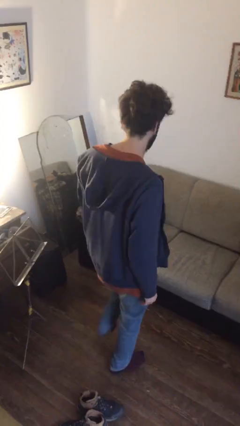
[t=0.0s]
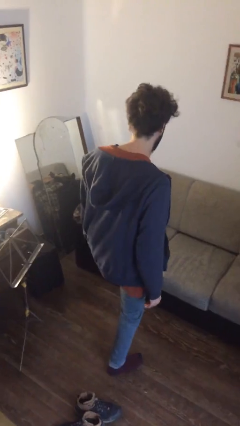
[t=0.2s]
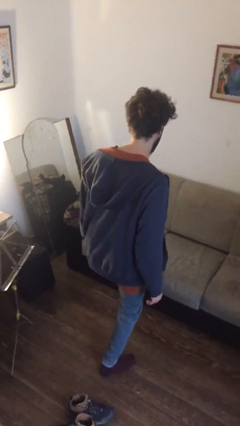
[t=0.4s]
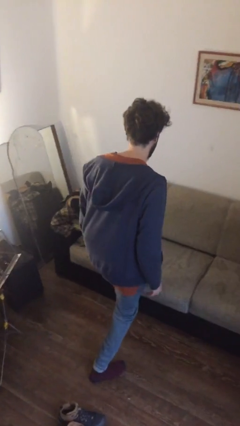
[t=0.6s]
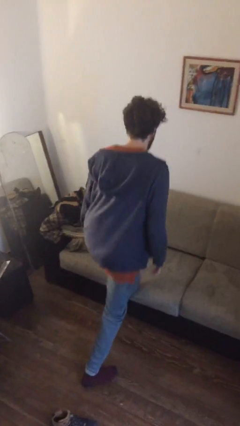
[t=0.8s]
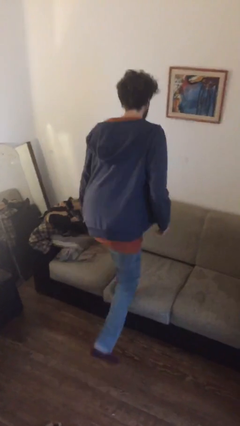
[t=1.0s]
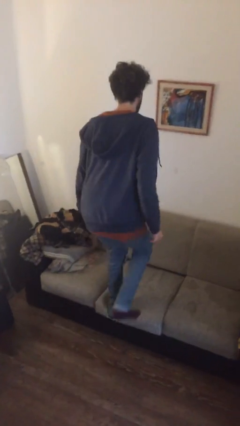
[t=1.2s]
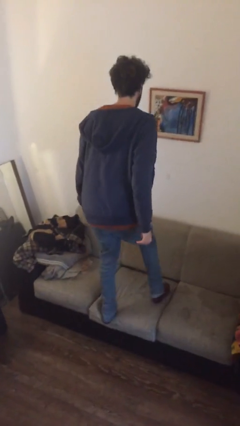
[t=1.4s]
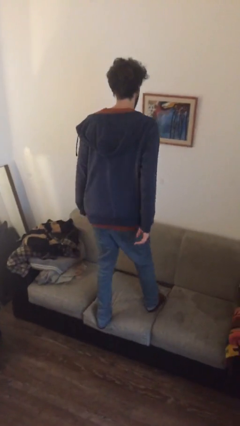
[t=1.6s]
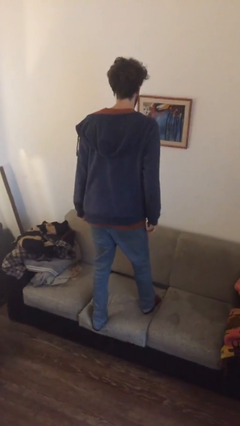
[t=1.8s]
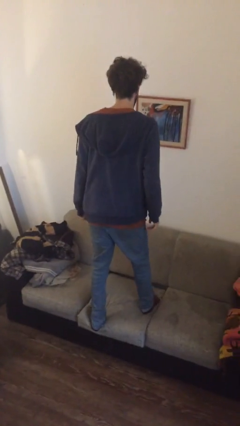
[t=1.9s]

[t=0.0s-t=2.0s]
person climbs on couch

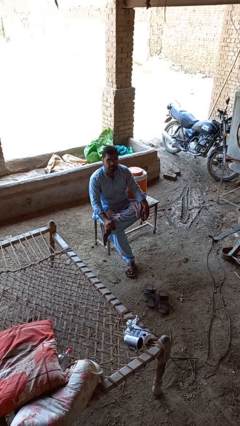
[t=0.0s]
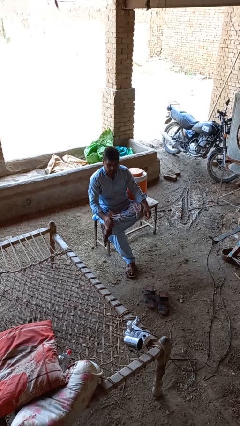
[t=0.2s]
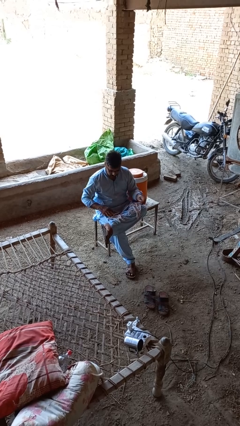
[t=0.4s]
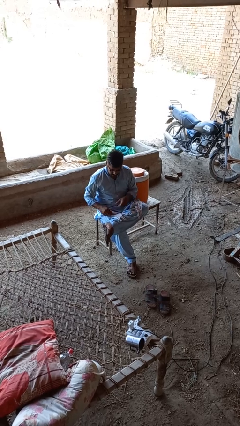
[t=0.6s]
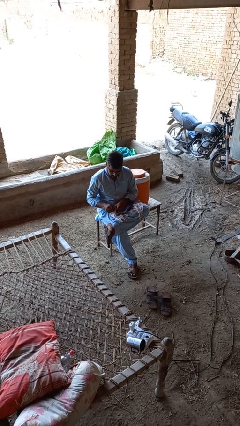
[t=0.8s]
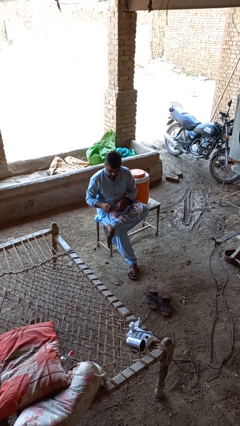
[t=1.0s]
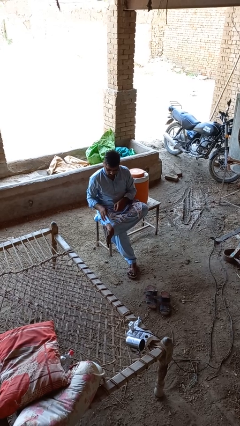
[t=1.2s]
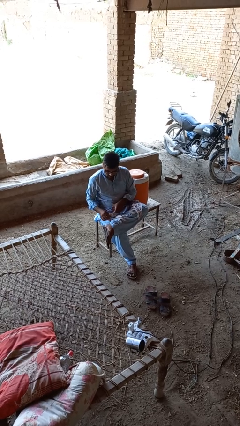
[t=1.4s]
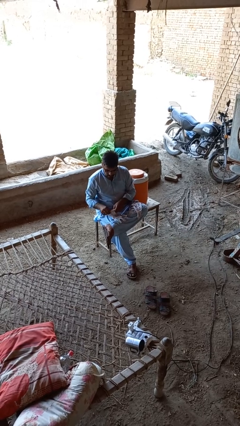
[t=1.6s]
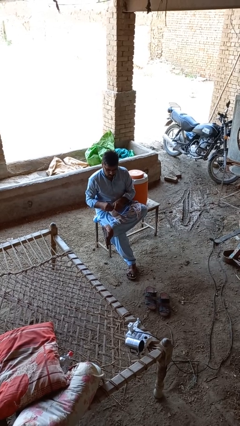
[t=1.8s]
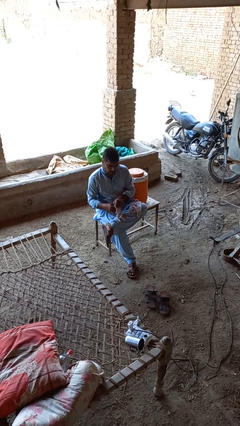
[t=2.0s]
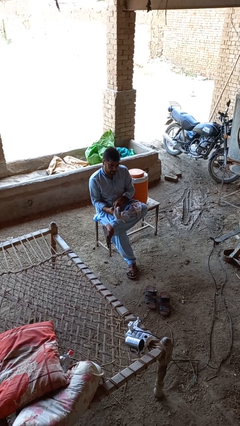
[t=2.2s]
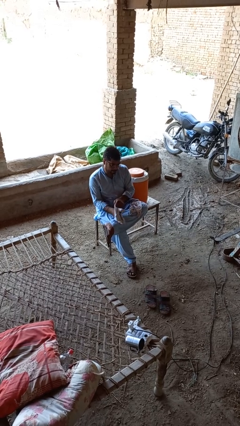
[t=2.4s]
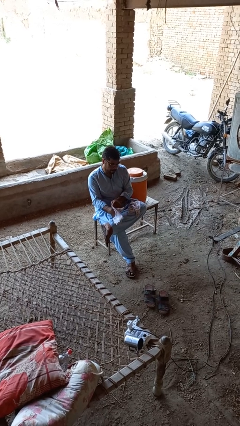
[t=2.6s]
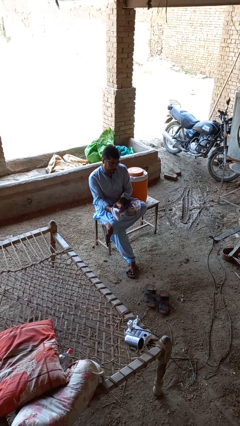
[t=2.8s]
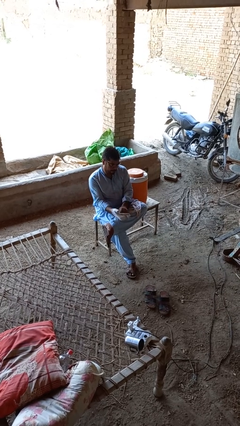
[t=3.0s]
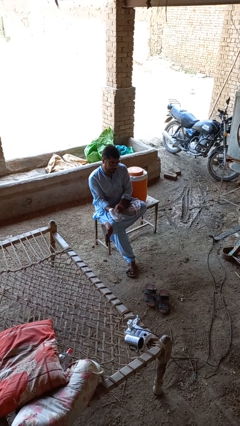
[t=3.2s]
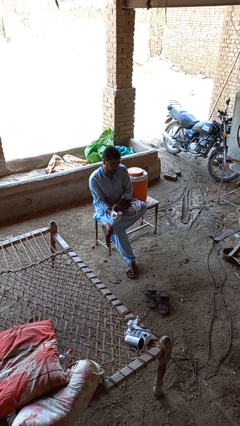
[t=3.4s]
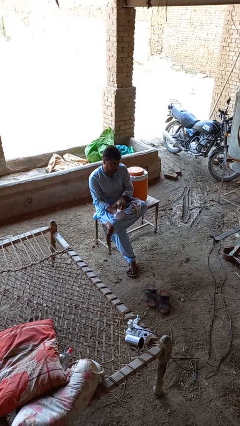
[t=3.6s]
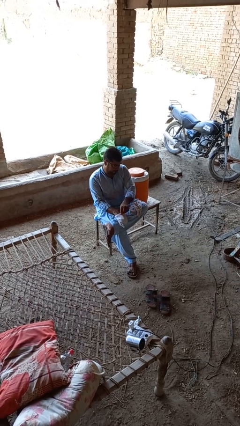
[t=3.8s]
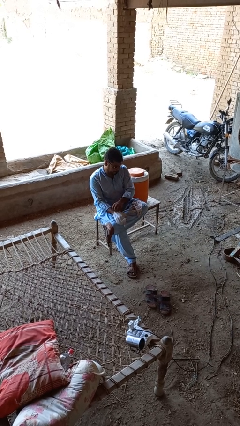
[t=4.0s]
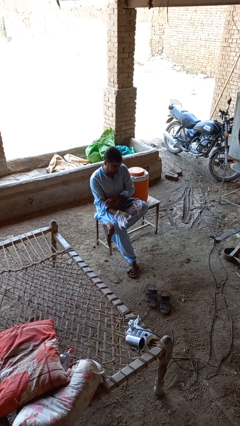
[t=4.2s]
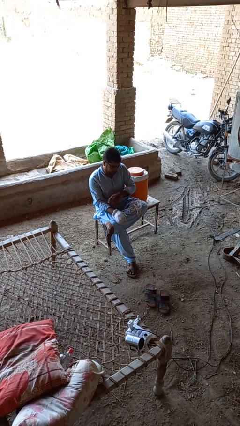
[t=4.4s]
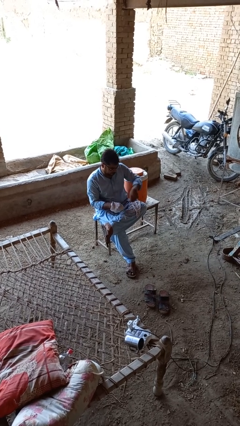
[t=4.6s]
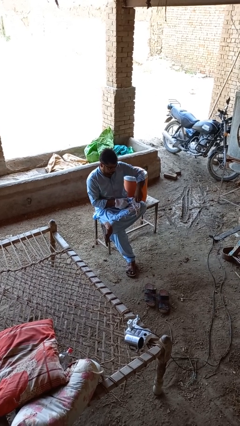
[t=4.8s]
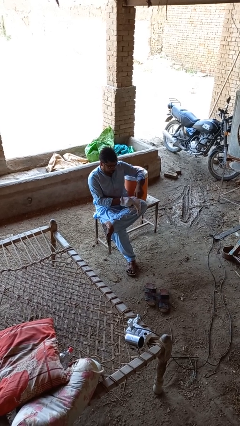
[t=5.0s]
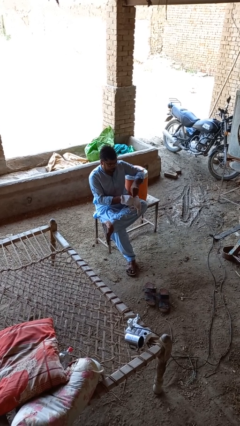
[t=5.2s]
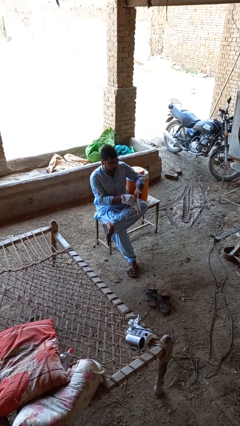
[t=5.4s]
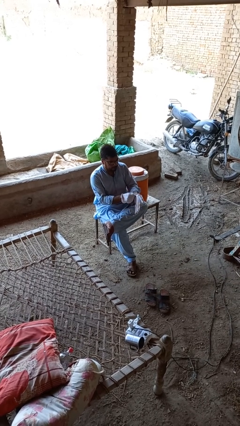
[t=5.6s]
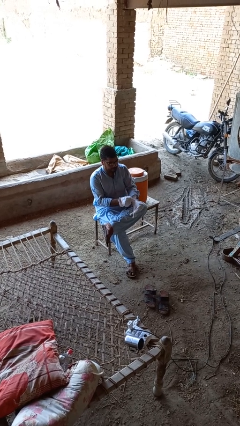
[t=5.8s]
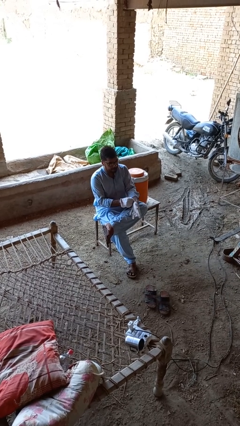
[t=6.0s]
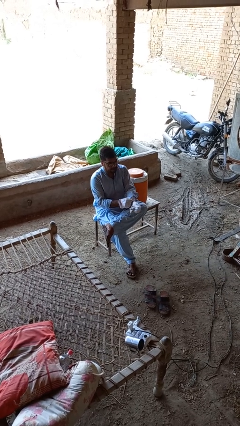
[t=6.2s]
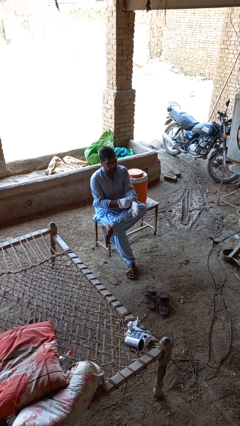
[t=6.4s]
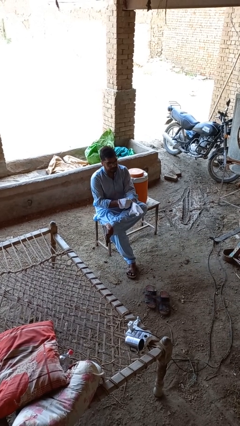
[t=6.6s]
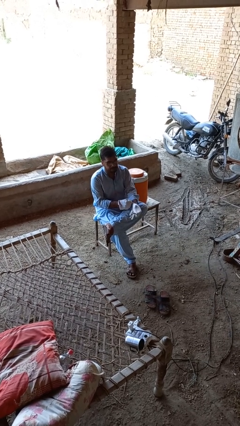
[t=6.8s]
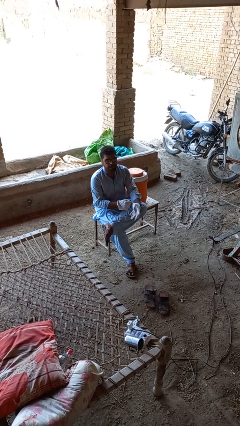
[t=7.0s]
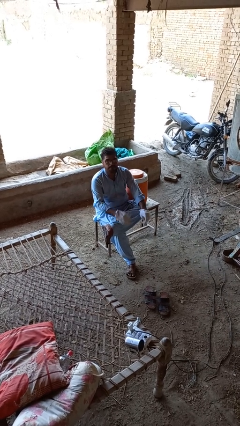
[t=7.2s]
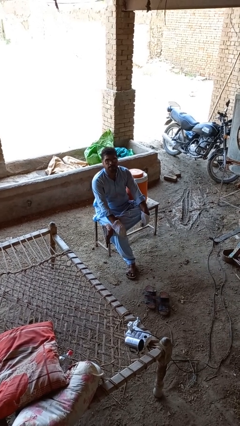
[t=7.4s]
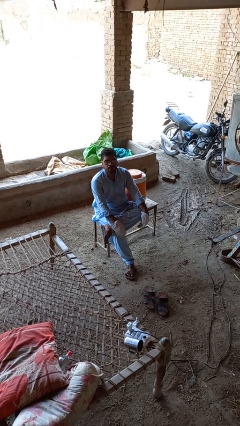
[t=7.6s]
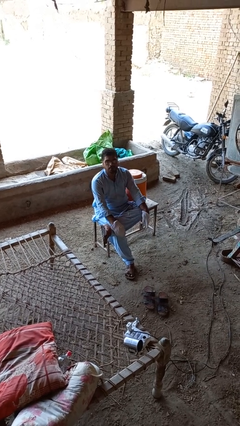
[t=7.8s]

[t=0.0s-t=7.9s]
person puts on gloves

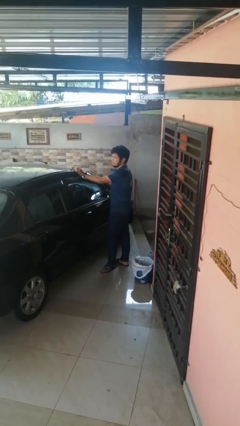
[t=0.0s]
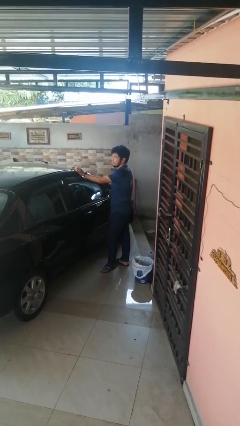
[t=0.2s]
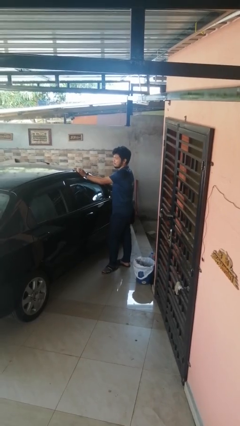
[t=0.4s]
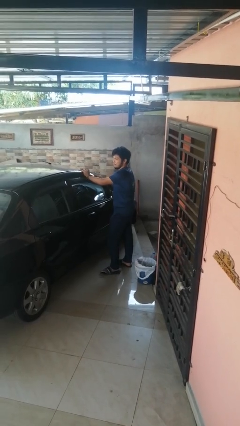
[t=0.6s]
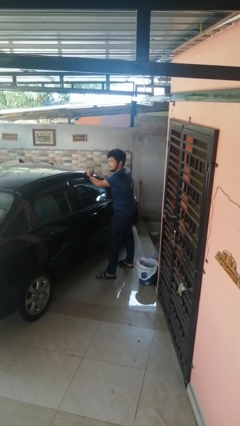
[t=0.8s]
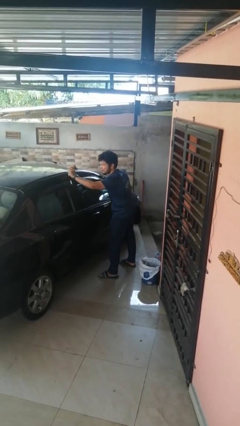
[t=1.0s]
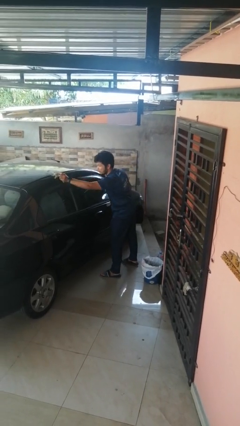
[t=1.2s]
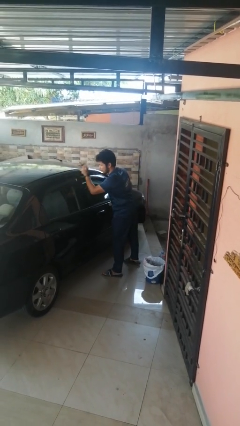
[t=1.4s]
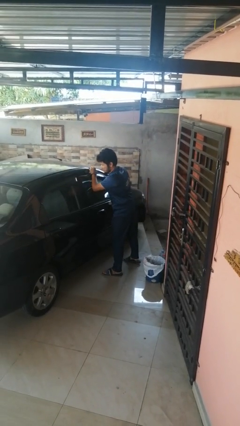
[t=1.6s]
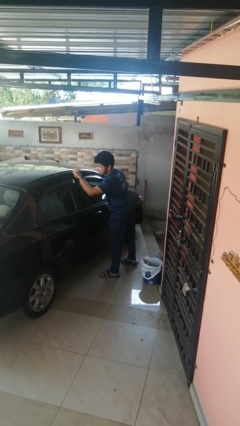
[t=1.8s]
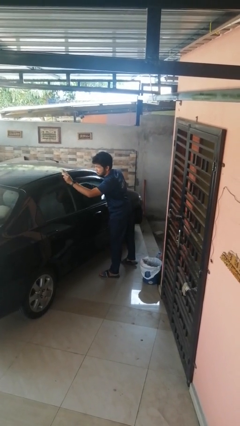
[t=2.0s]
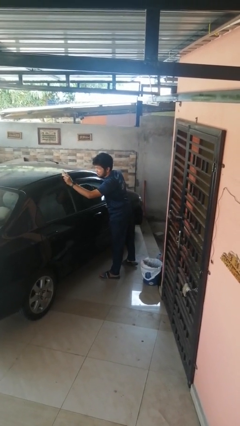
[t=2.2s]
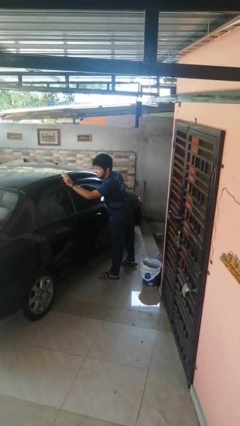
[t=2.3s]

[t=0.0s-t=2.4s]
person polishes car with rag

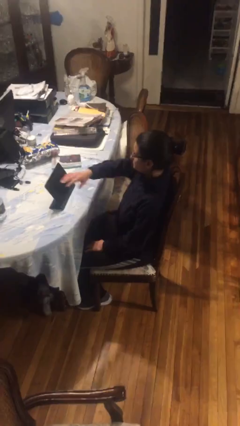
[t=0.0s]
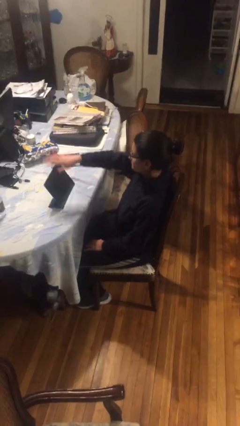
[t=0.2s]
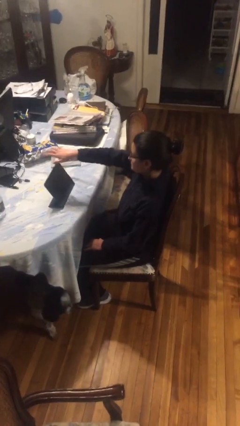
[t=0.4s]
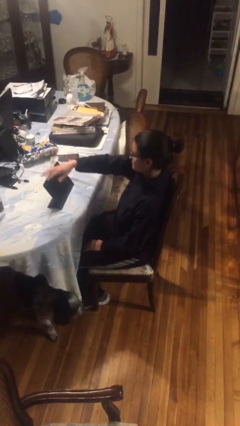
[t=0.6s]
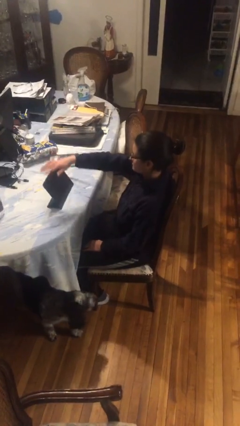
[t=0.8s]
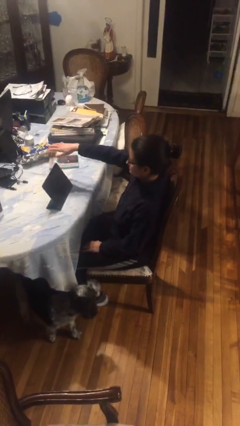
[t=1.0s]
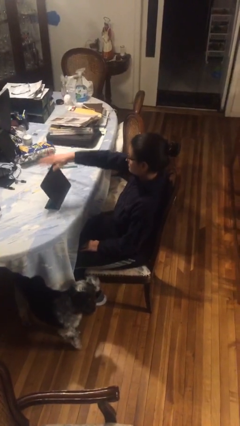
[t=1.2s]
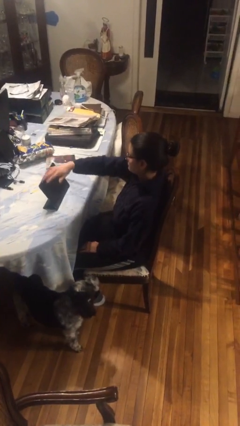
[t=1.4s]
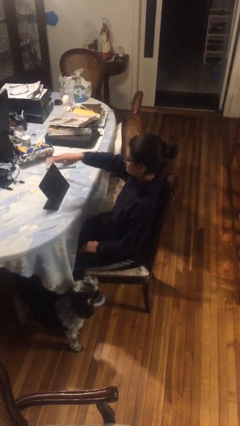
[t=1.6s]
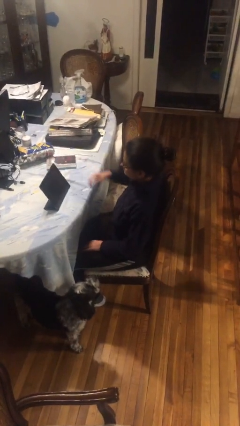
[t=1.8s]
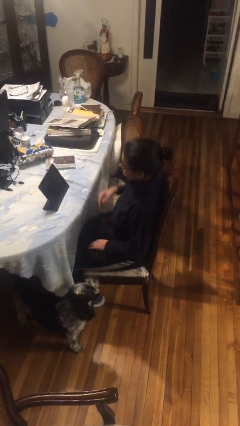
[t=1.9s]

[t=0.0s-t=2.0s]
person waves hand over object

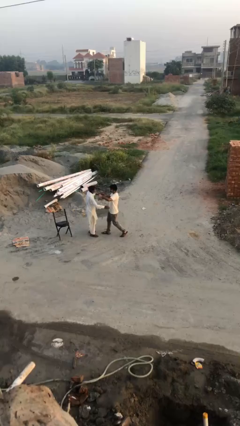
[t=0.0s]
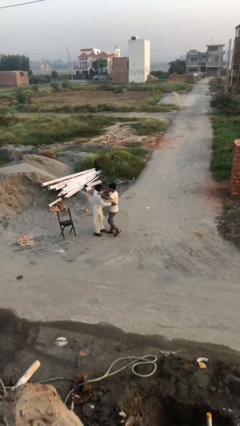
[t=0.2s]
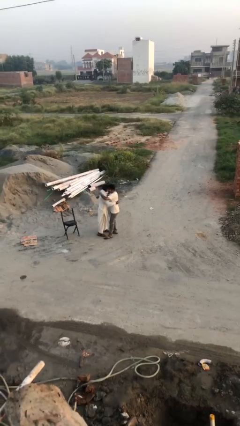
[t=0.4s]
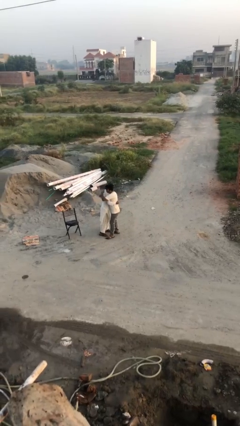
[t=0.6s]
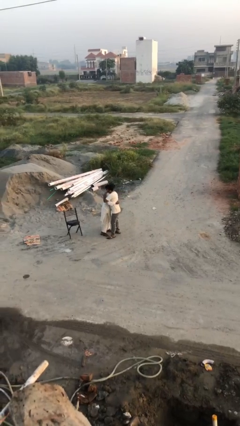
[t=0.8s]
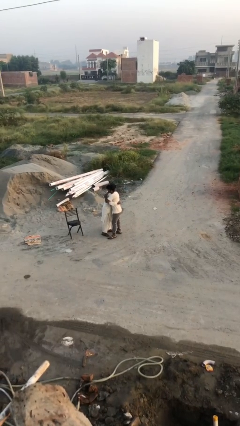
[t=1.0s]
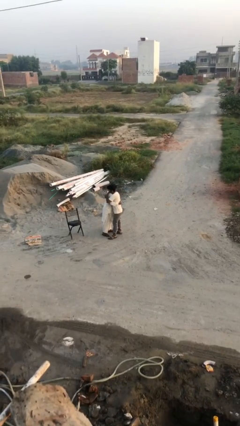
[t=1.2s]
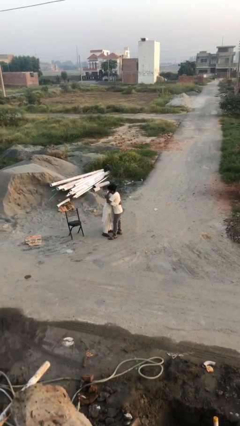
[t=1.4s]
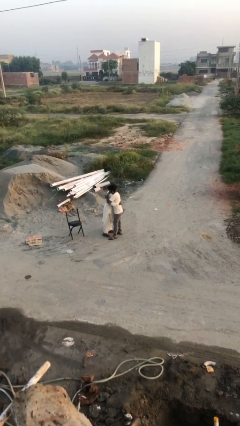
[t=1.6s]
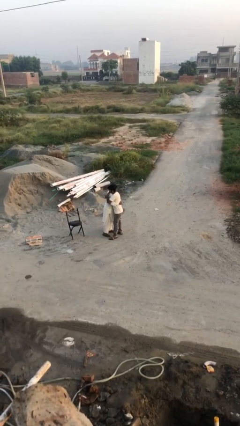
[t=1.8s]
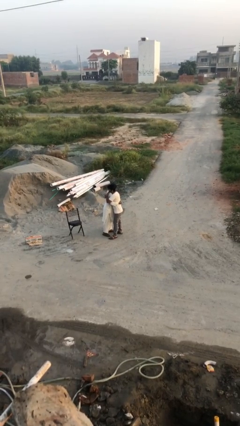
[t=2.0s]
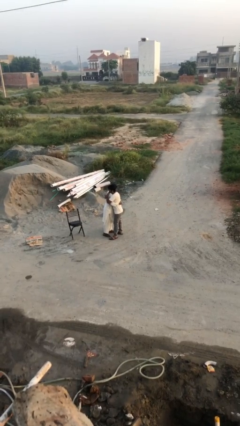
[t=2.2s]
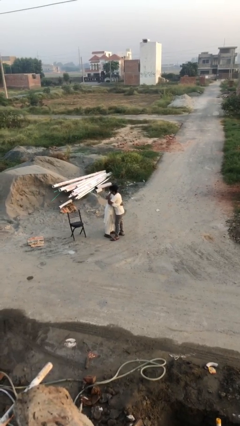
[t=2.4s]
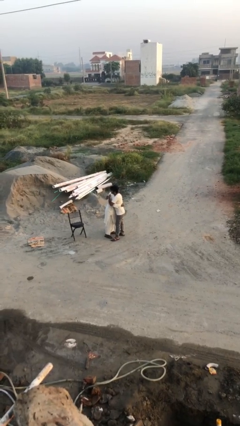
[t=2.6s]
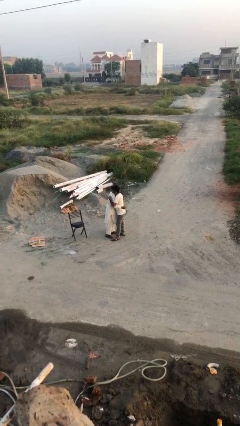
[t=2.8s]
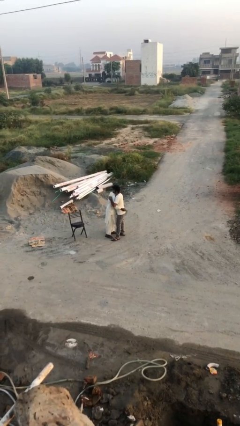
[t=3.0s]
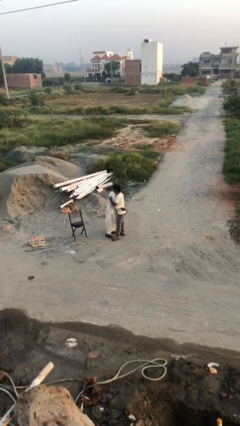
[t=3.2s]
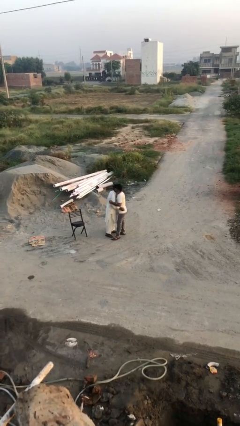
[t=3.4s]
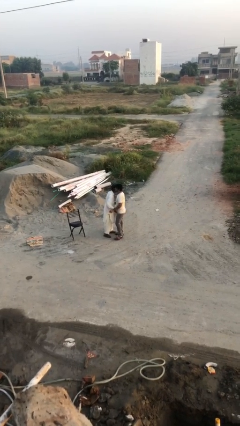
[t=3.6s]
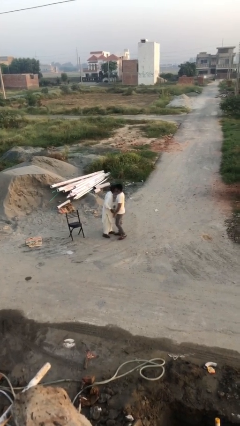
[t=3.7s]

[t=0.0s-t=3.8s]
person embraces person
